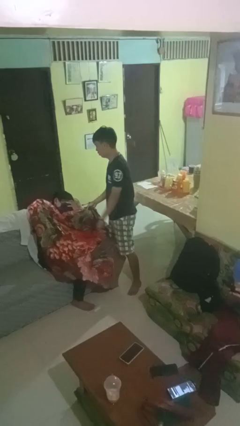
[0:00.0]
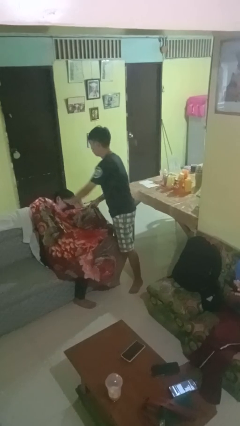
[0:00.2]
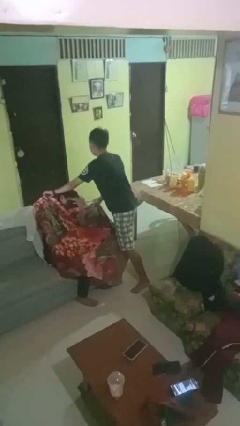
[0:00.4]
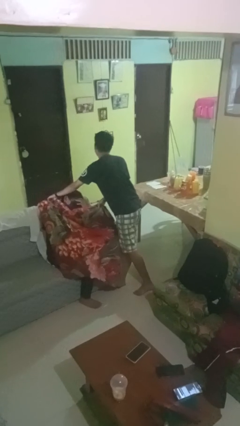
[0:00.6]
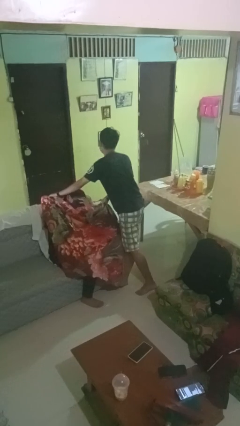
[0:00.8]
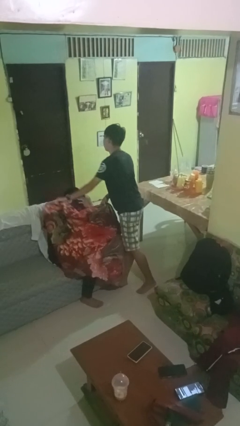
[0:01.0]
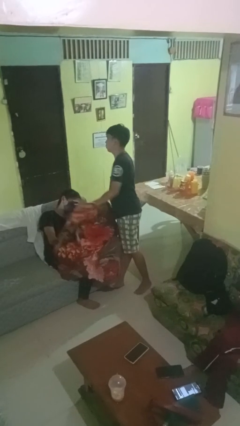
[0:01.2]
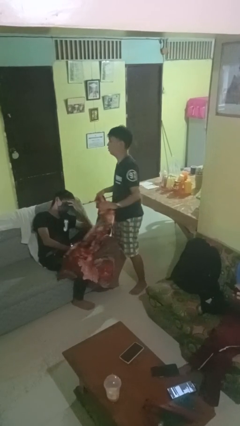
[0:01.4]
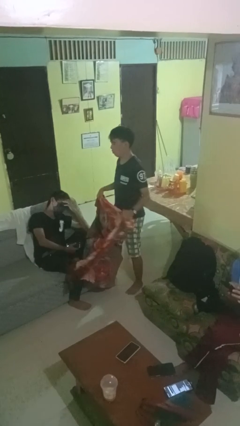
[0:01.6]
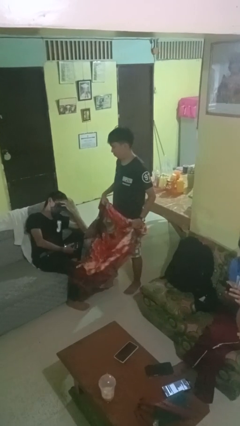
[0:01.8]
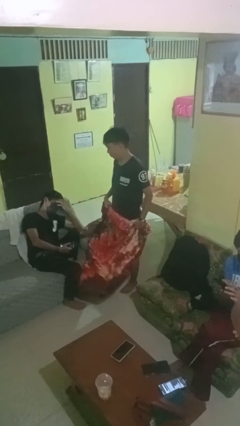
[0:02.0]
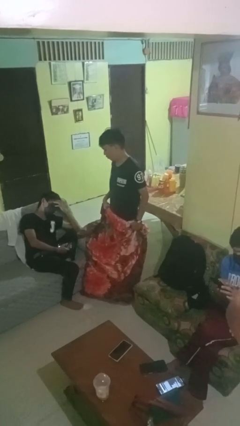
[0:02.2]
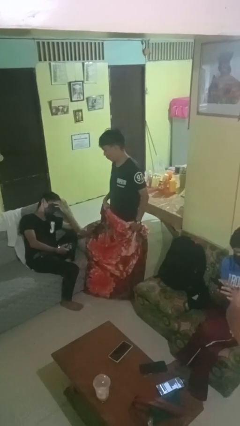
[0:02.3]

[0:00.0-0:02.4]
person uncovers friend with blanket

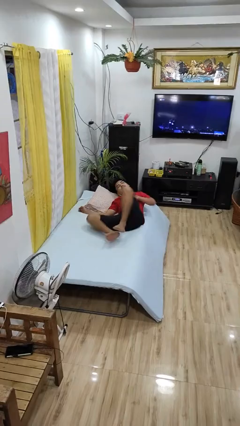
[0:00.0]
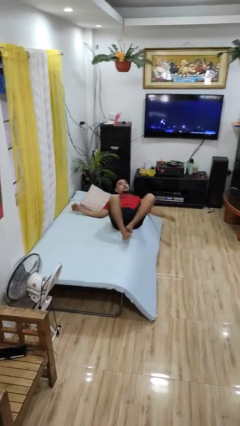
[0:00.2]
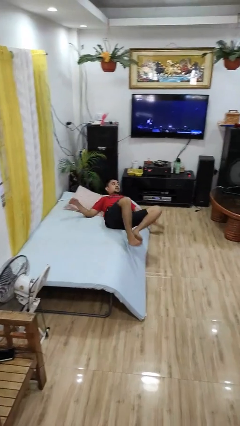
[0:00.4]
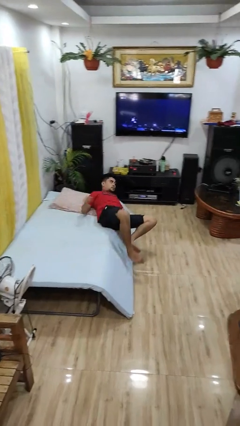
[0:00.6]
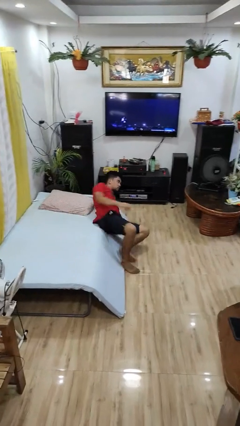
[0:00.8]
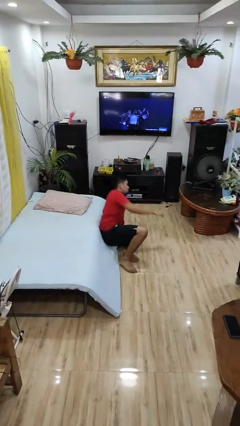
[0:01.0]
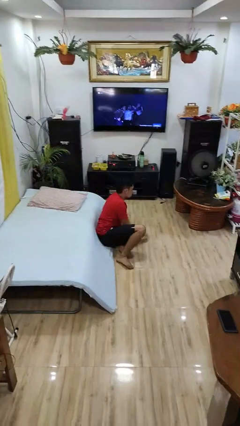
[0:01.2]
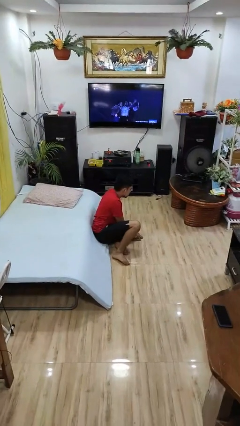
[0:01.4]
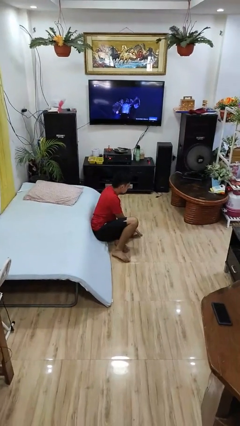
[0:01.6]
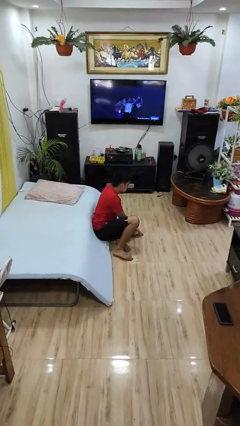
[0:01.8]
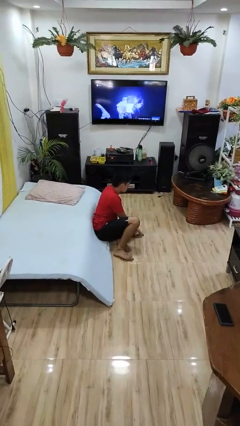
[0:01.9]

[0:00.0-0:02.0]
person falls from bed

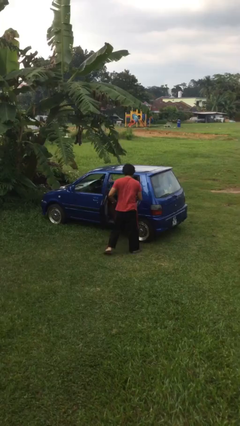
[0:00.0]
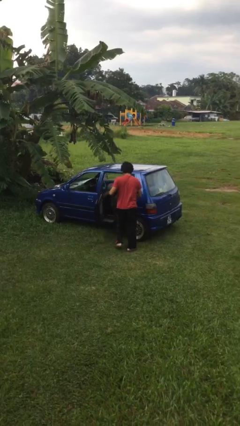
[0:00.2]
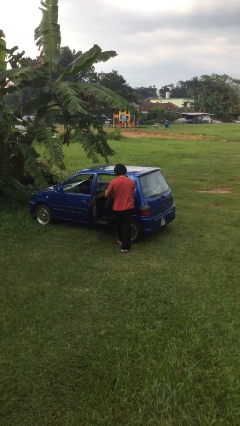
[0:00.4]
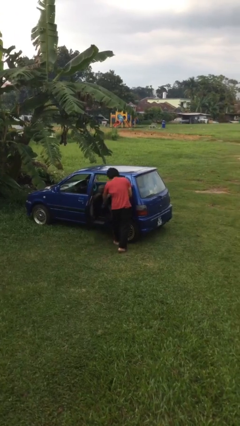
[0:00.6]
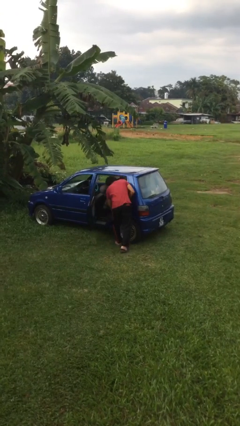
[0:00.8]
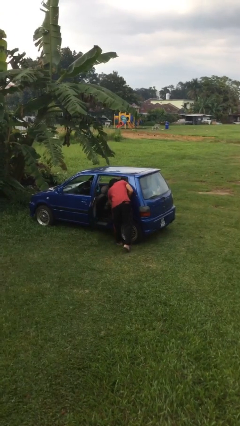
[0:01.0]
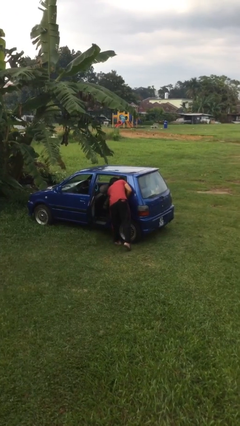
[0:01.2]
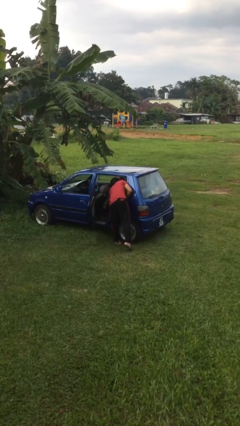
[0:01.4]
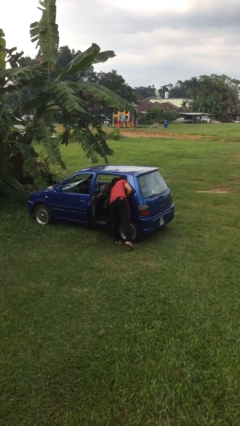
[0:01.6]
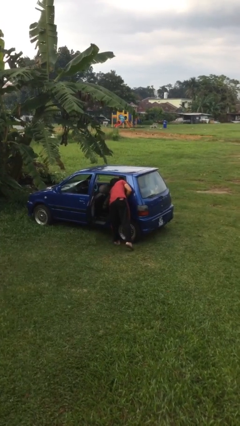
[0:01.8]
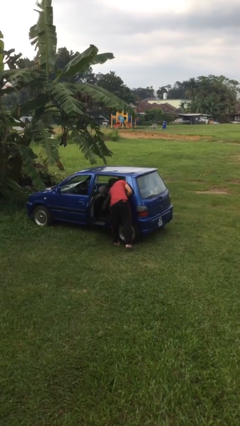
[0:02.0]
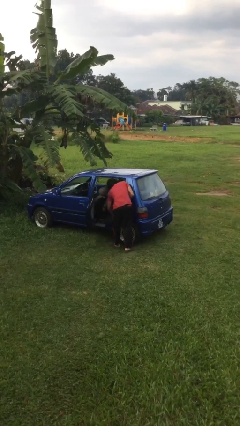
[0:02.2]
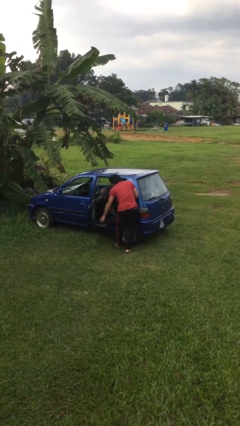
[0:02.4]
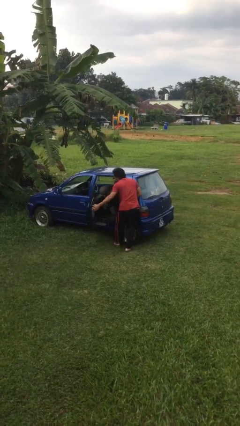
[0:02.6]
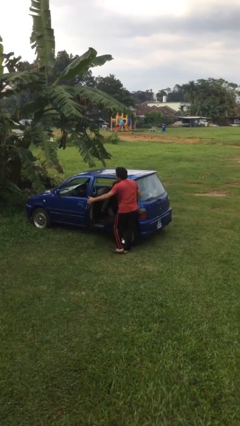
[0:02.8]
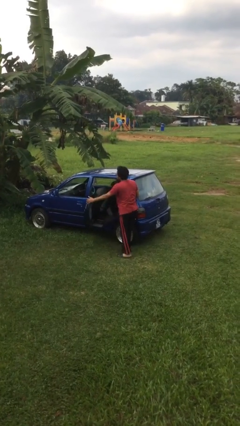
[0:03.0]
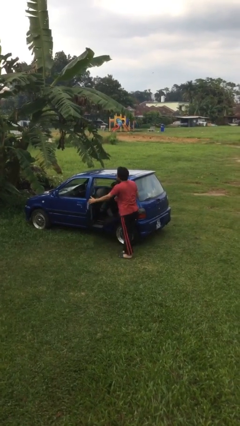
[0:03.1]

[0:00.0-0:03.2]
person loads car

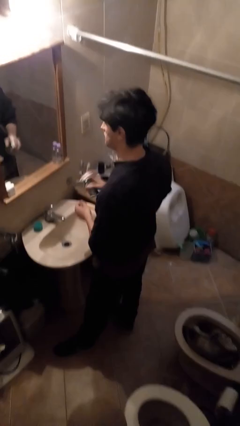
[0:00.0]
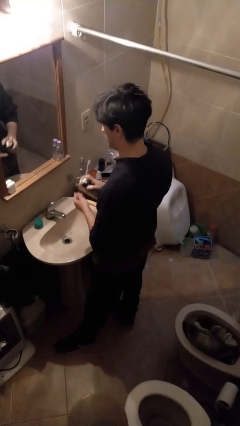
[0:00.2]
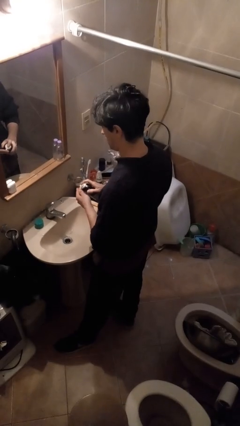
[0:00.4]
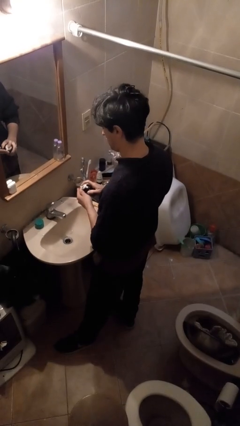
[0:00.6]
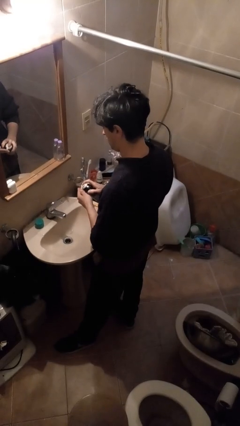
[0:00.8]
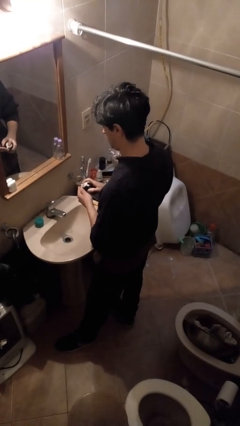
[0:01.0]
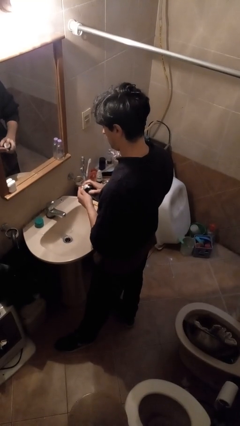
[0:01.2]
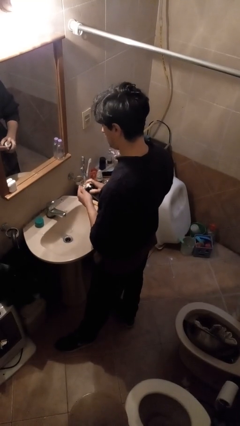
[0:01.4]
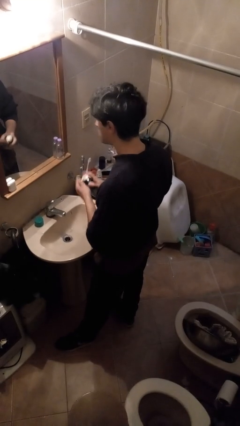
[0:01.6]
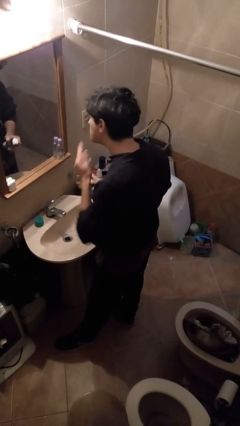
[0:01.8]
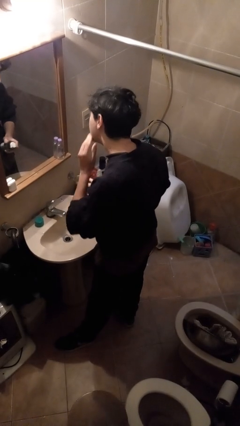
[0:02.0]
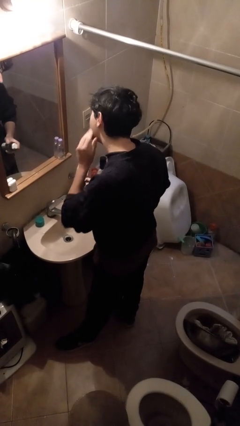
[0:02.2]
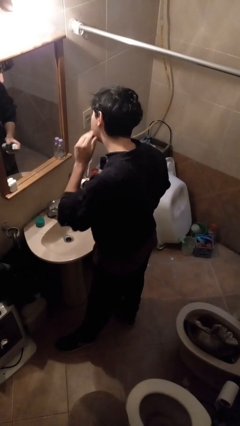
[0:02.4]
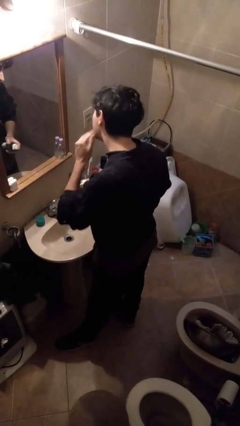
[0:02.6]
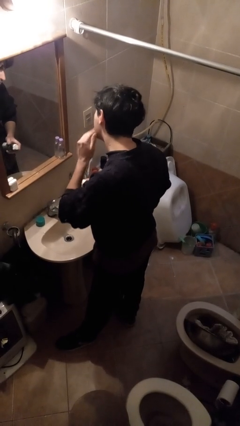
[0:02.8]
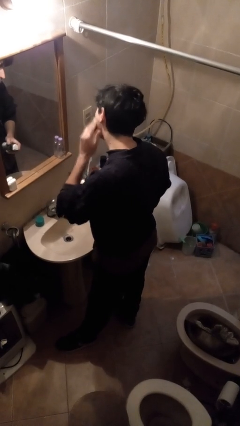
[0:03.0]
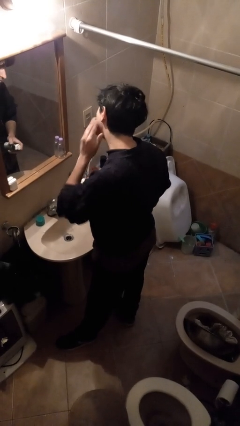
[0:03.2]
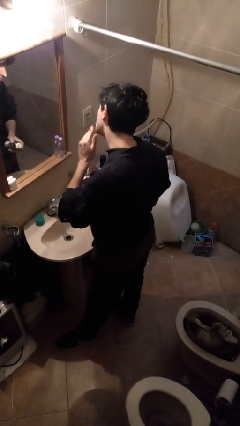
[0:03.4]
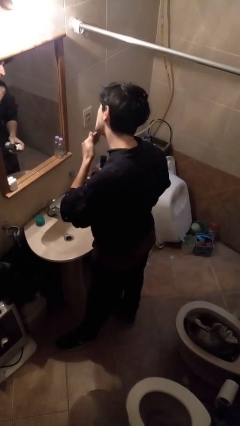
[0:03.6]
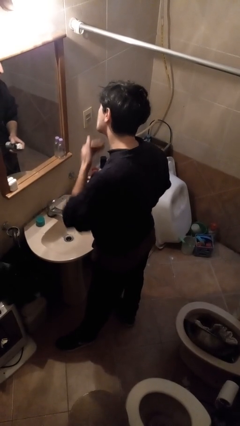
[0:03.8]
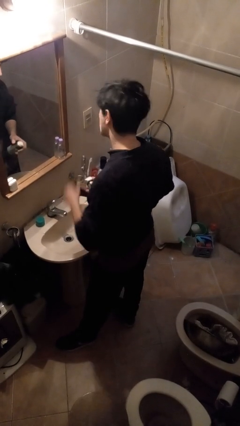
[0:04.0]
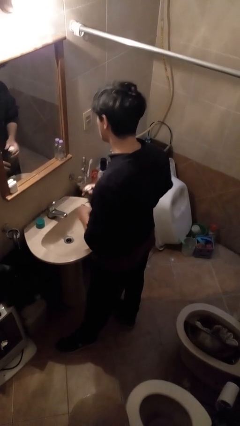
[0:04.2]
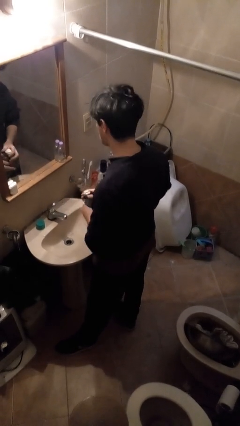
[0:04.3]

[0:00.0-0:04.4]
person applies shaving cream

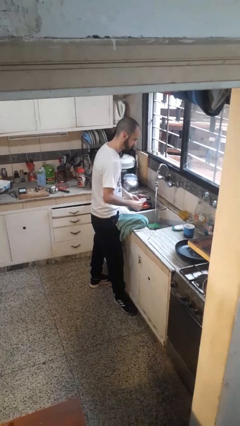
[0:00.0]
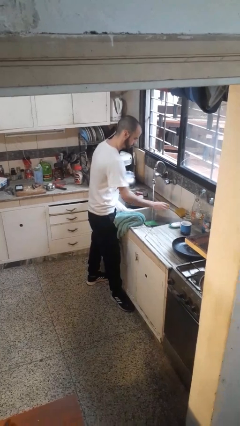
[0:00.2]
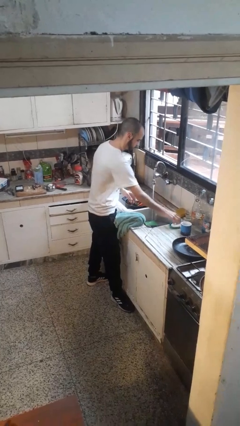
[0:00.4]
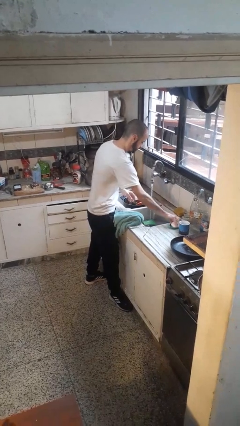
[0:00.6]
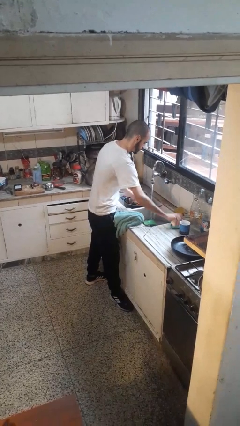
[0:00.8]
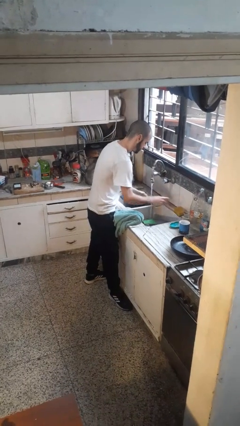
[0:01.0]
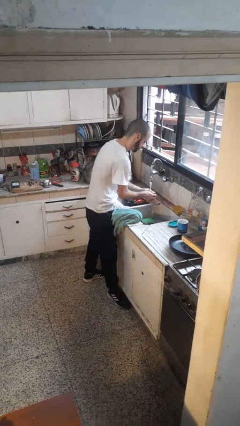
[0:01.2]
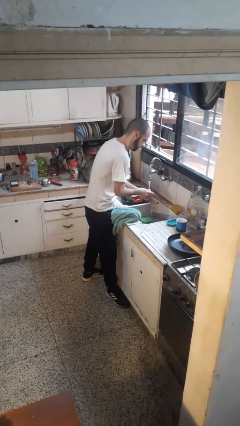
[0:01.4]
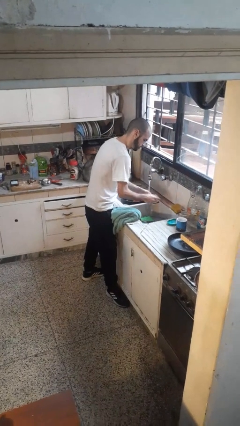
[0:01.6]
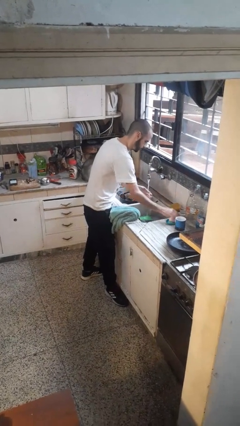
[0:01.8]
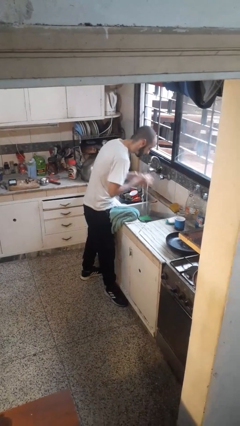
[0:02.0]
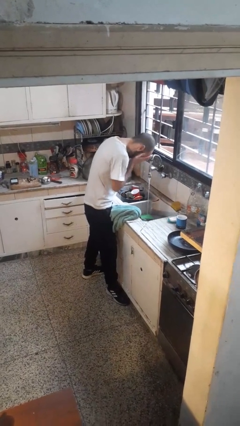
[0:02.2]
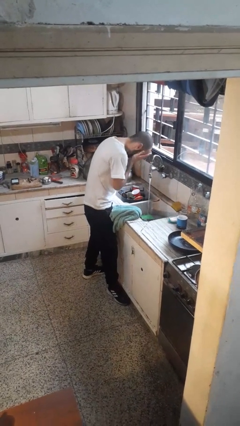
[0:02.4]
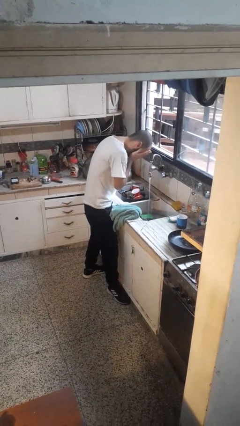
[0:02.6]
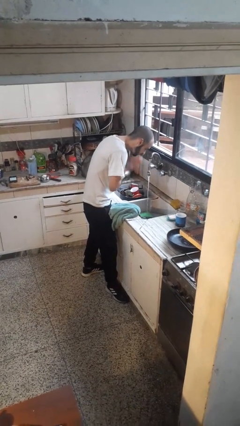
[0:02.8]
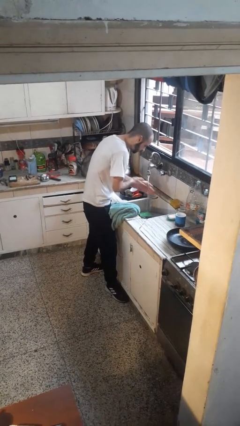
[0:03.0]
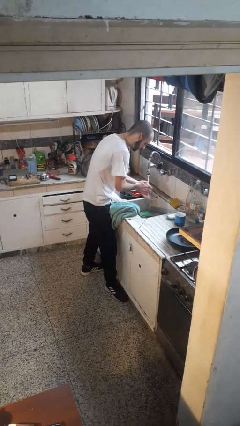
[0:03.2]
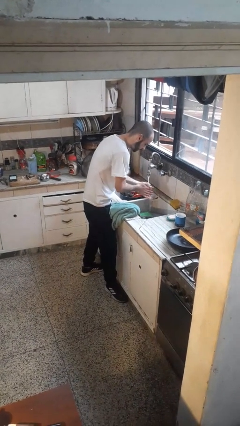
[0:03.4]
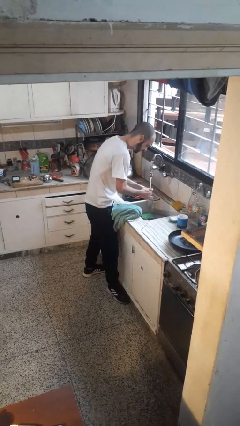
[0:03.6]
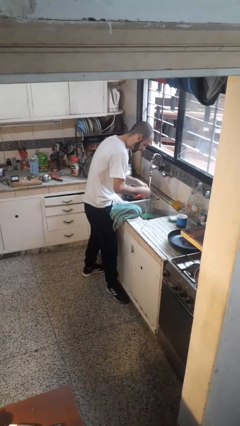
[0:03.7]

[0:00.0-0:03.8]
person washes face

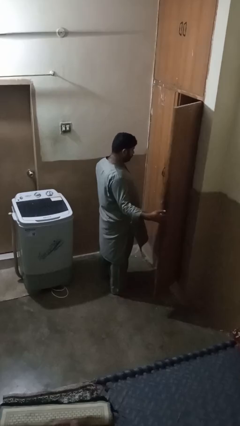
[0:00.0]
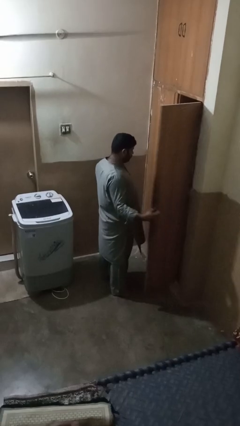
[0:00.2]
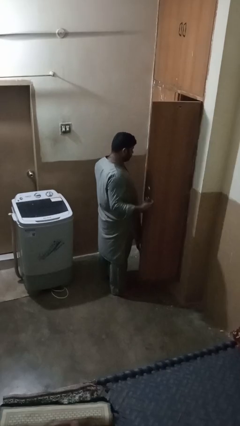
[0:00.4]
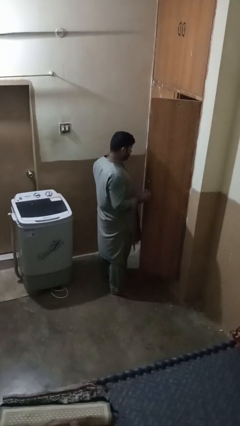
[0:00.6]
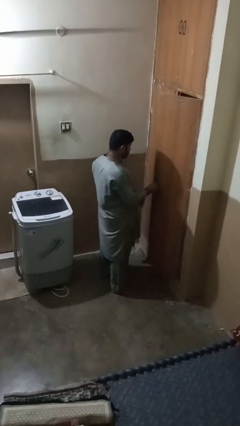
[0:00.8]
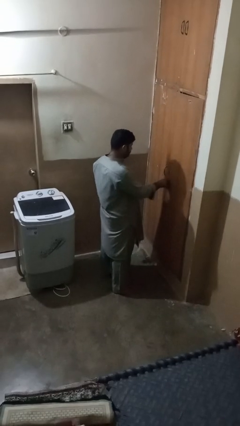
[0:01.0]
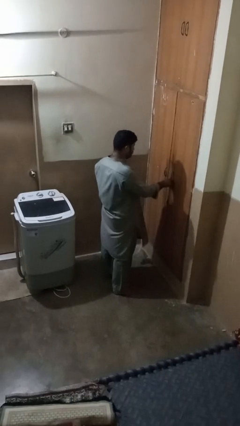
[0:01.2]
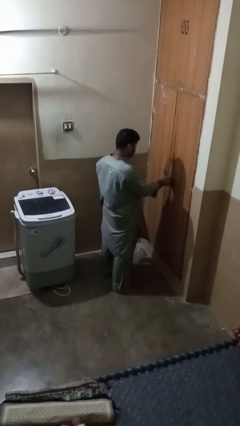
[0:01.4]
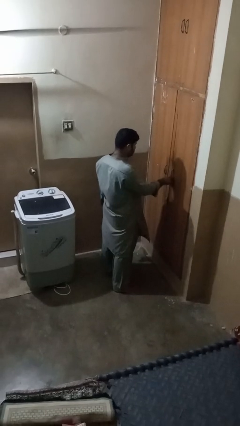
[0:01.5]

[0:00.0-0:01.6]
person closes closet door
